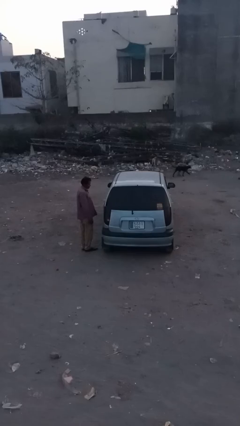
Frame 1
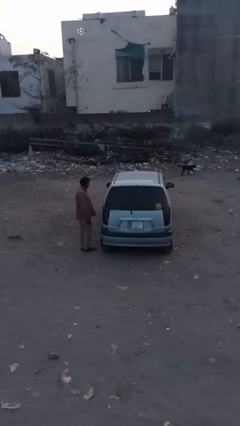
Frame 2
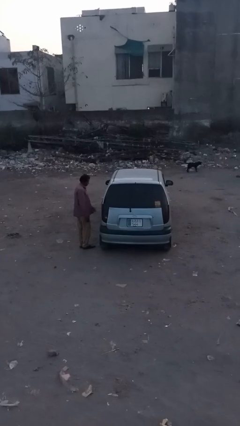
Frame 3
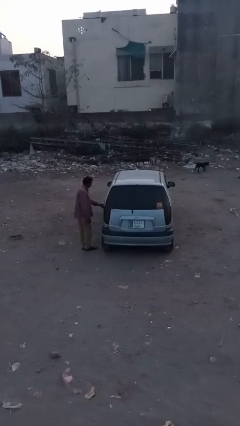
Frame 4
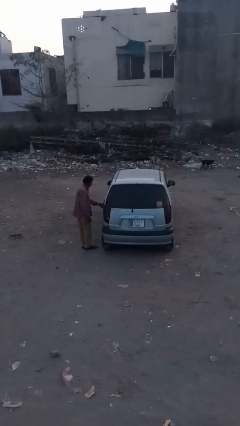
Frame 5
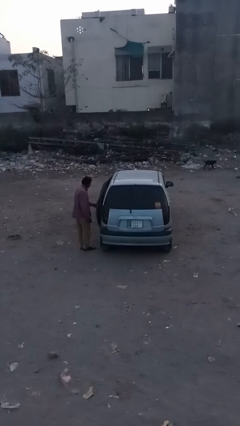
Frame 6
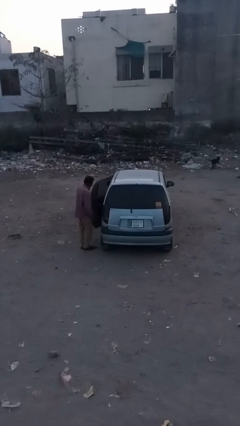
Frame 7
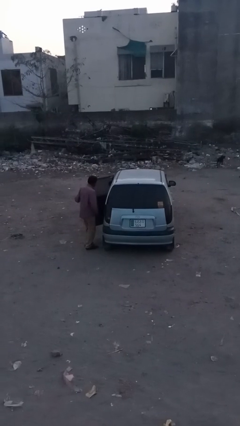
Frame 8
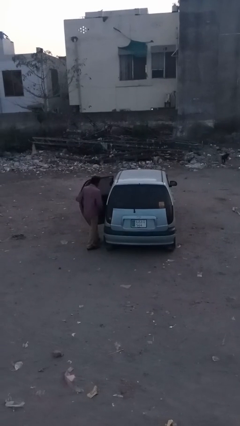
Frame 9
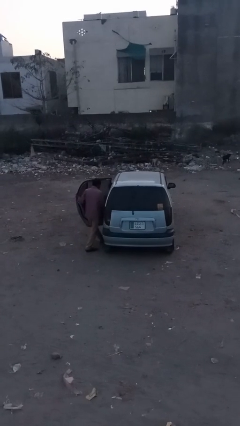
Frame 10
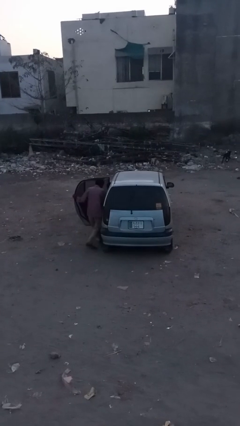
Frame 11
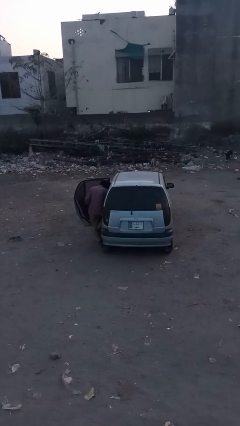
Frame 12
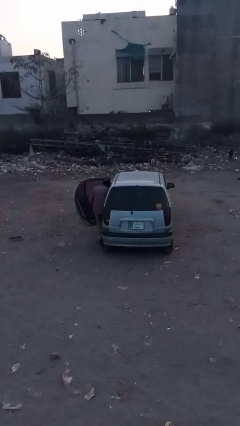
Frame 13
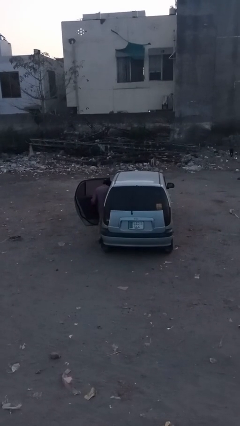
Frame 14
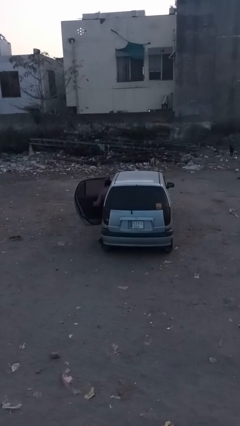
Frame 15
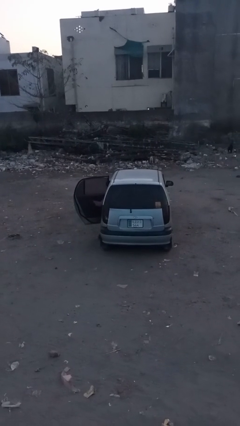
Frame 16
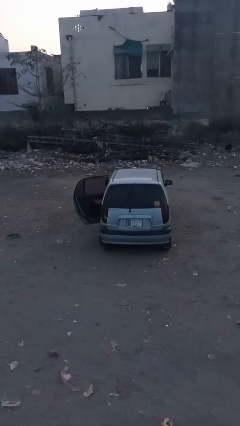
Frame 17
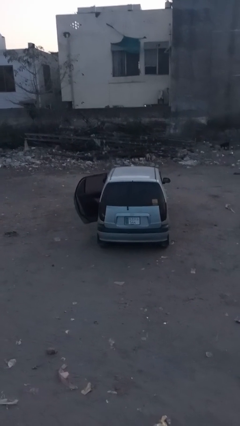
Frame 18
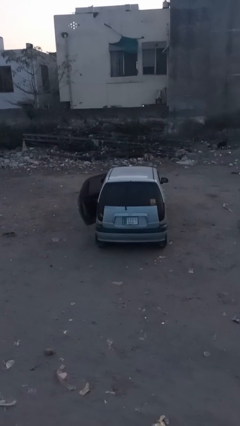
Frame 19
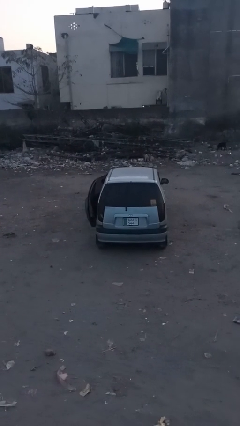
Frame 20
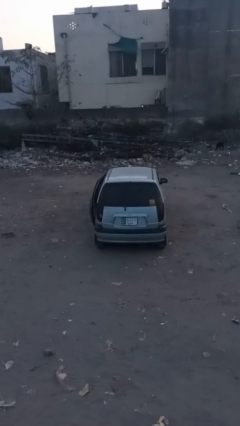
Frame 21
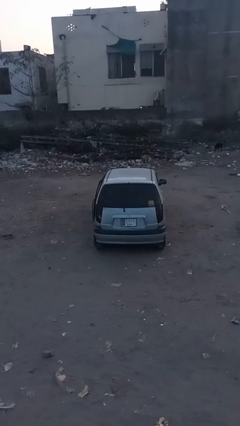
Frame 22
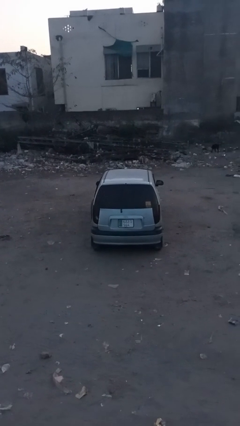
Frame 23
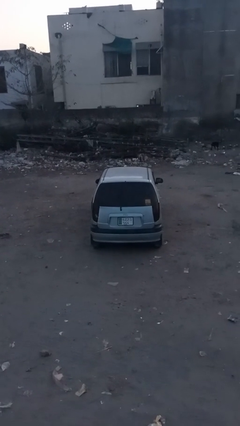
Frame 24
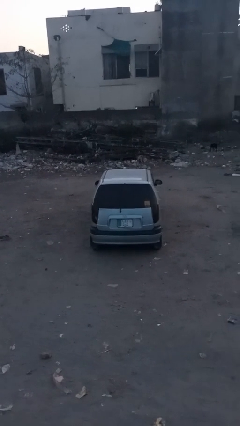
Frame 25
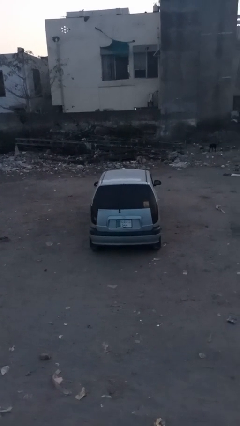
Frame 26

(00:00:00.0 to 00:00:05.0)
car picks up person

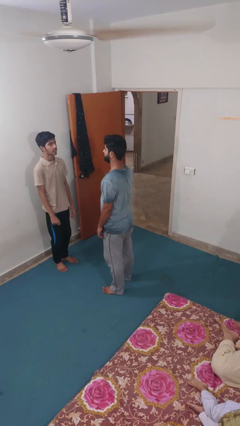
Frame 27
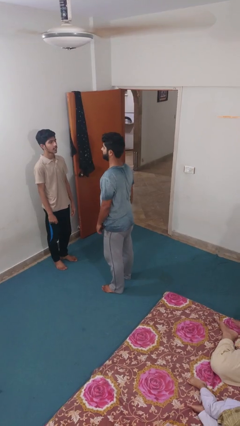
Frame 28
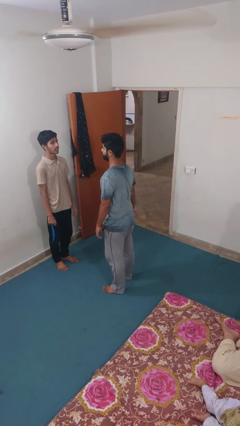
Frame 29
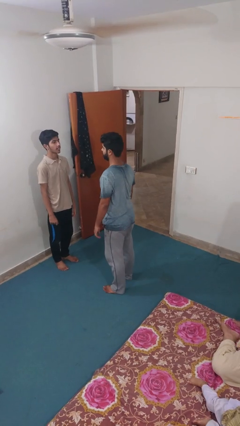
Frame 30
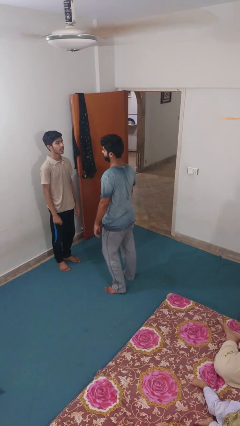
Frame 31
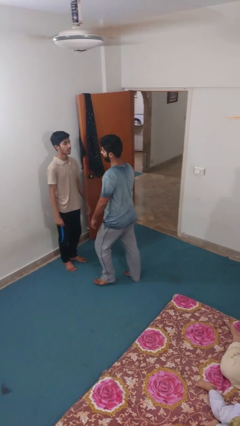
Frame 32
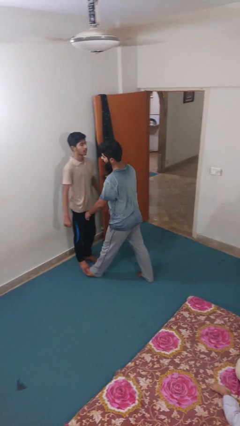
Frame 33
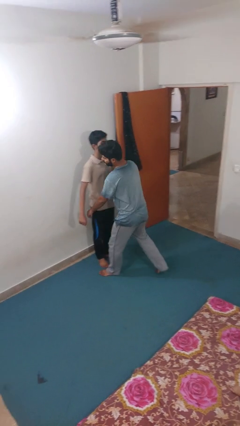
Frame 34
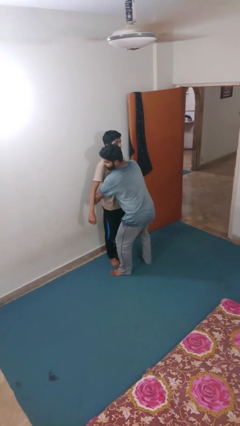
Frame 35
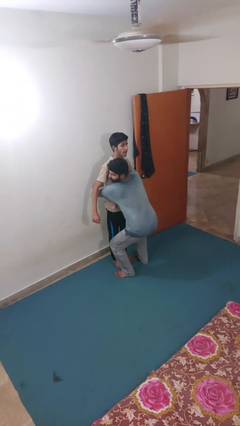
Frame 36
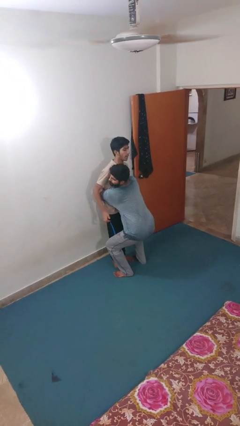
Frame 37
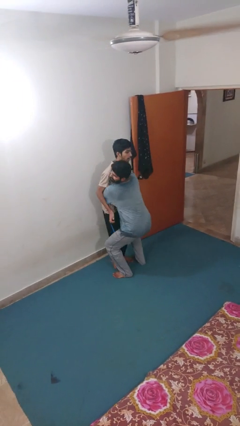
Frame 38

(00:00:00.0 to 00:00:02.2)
person picks up person

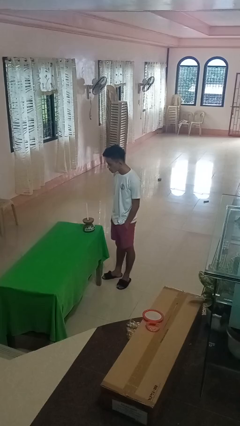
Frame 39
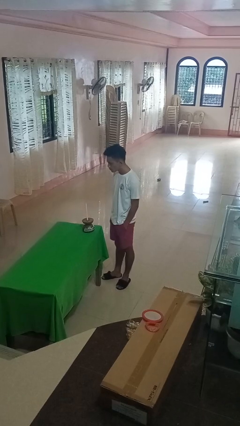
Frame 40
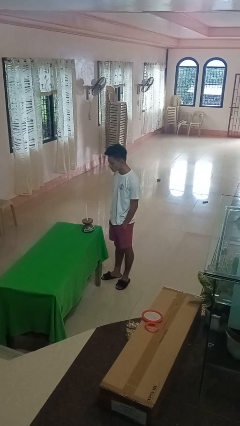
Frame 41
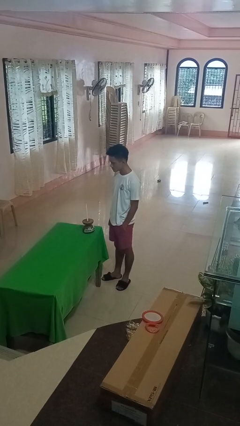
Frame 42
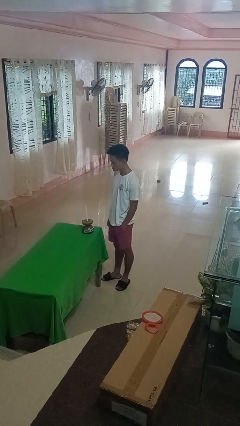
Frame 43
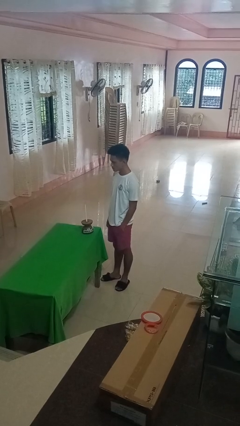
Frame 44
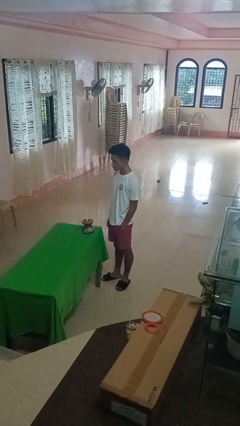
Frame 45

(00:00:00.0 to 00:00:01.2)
person extinguishes candle

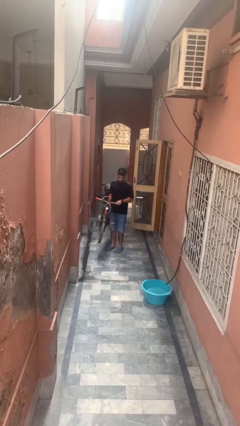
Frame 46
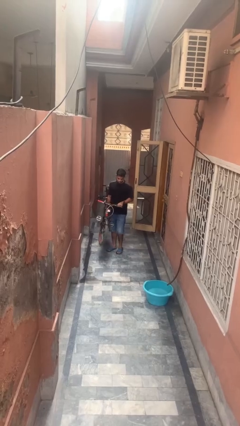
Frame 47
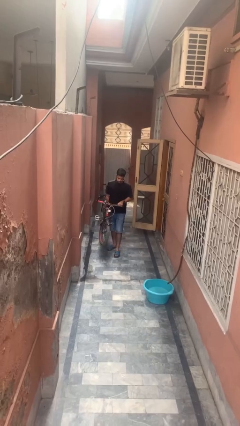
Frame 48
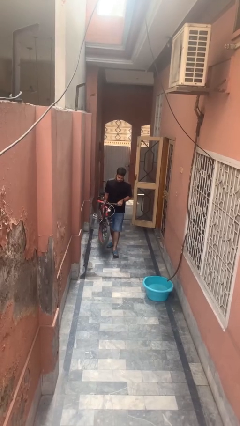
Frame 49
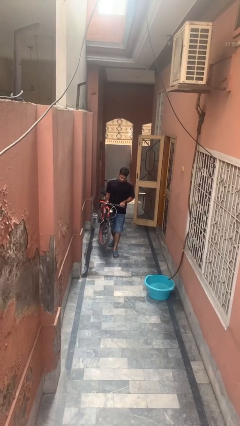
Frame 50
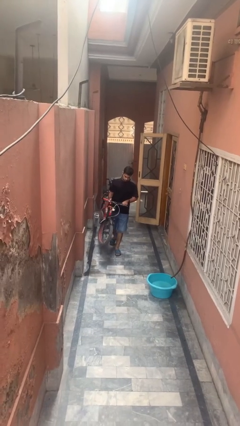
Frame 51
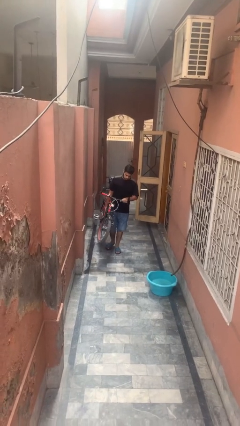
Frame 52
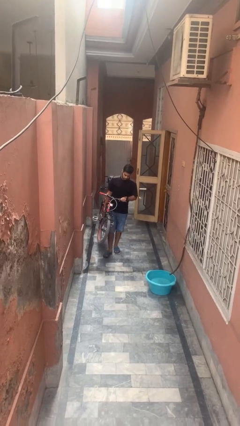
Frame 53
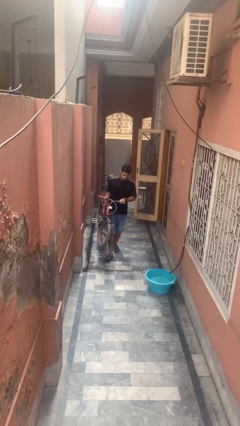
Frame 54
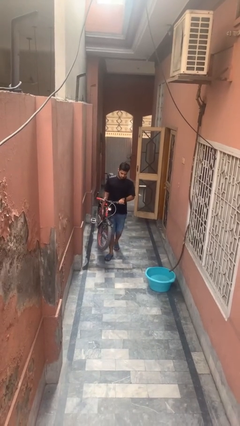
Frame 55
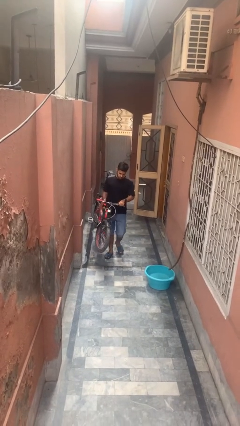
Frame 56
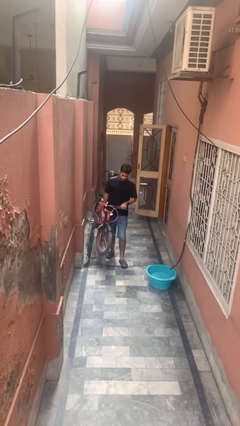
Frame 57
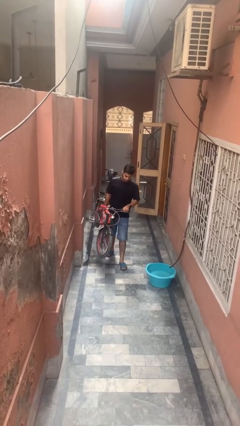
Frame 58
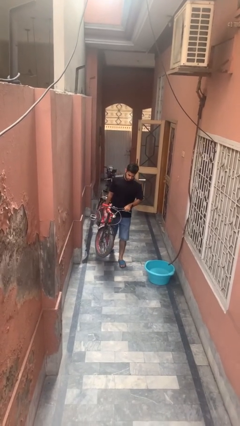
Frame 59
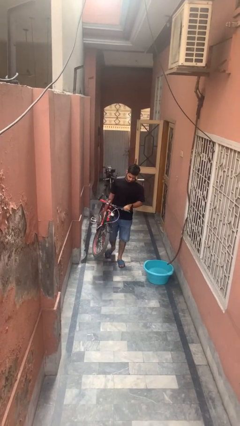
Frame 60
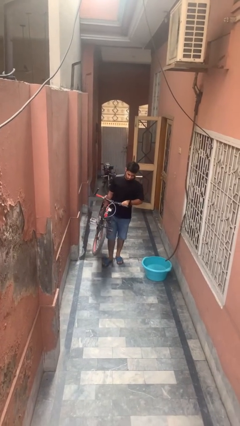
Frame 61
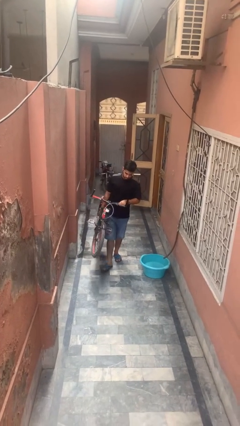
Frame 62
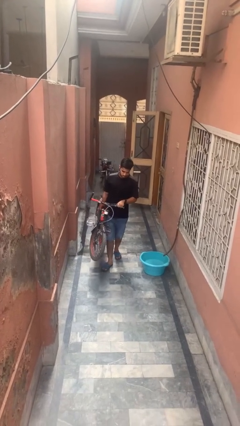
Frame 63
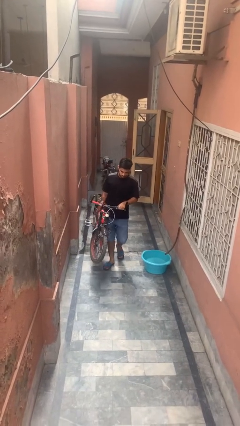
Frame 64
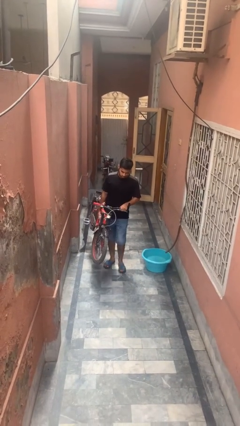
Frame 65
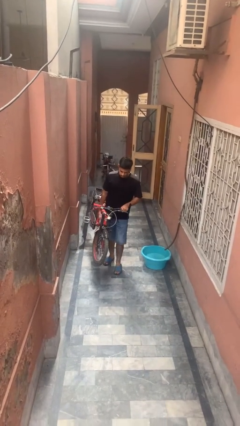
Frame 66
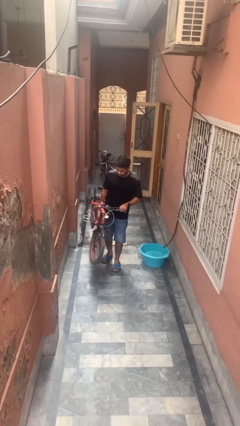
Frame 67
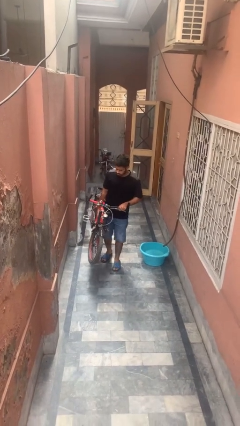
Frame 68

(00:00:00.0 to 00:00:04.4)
person carries bicycle

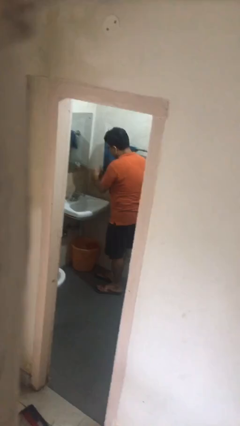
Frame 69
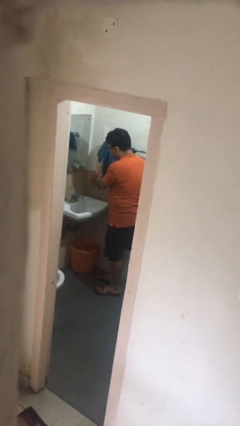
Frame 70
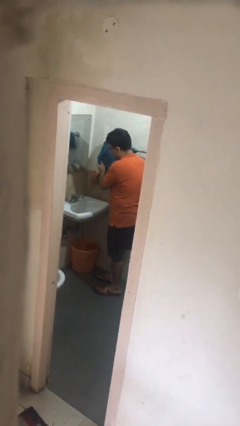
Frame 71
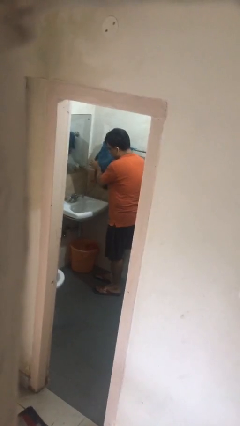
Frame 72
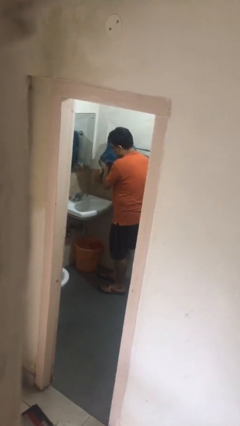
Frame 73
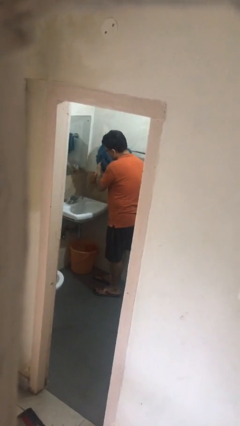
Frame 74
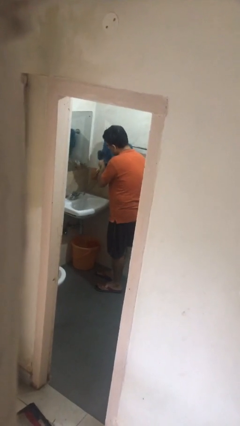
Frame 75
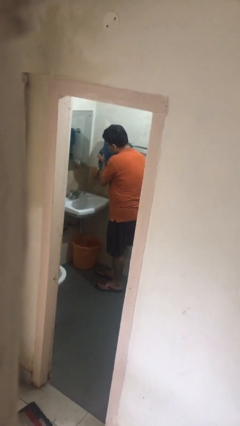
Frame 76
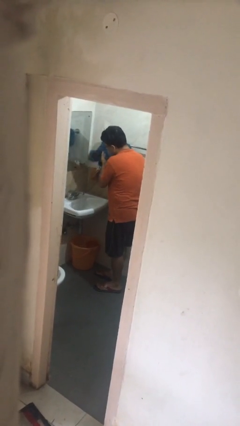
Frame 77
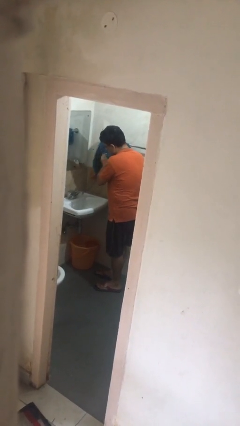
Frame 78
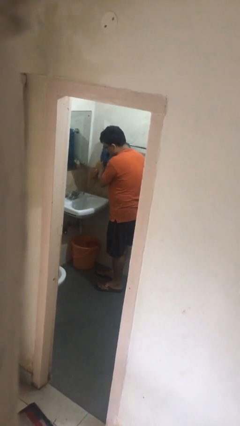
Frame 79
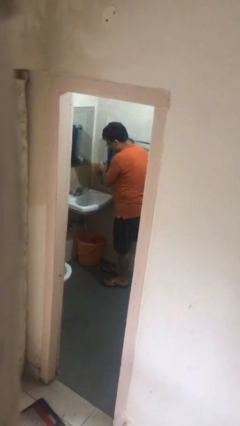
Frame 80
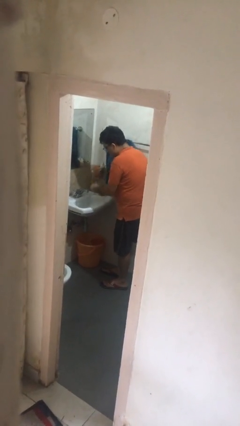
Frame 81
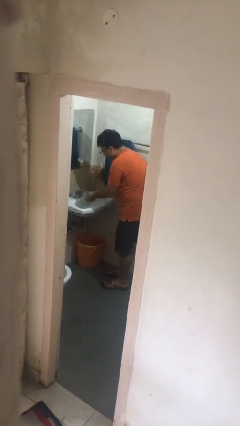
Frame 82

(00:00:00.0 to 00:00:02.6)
person dries hands with towel

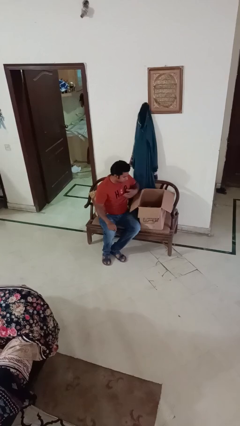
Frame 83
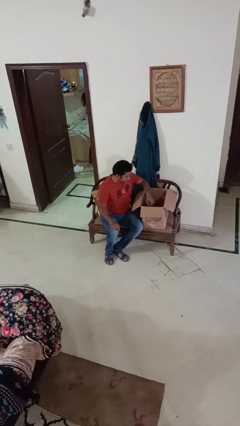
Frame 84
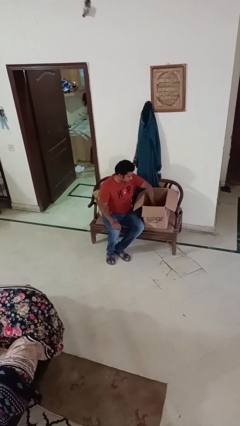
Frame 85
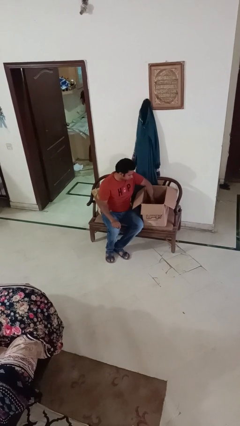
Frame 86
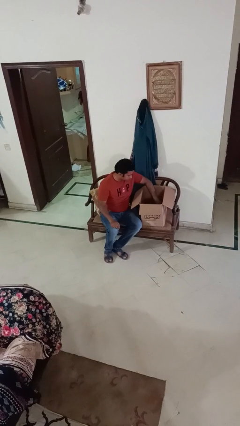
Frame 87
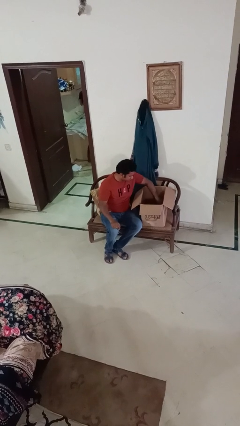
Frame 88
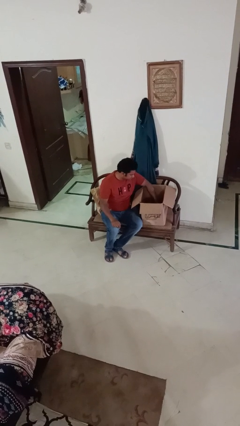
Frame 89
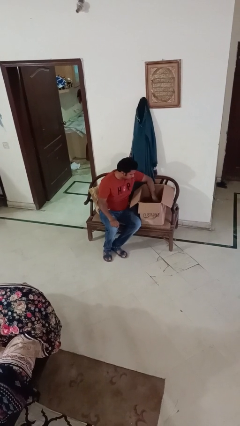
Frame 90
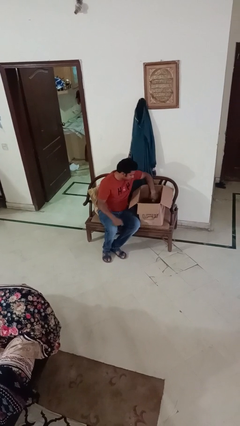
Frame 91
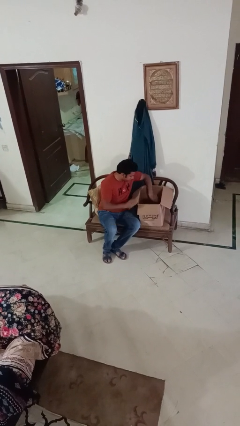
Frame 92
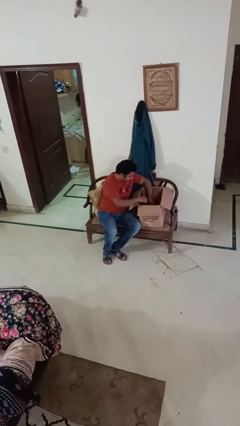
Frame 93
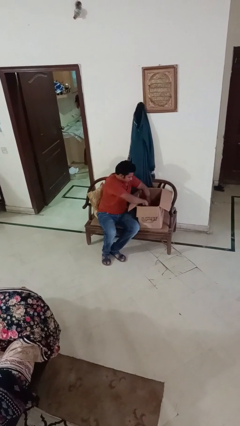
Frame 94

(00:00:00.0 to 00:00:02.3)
person searches in box
